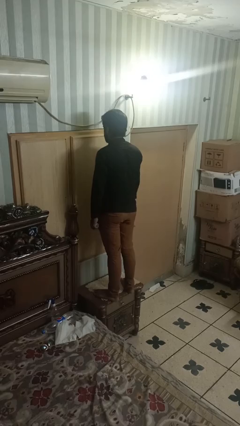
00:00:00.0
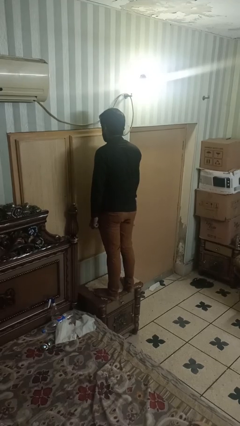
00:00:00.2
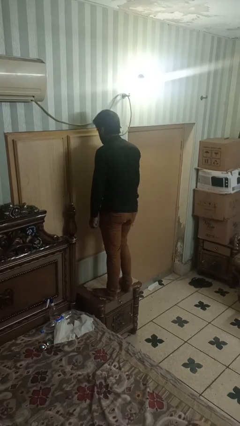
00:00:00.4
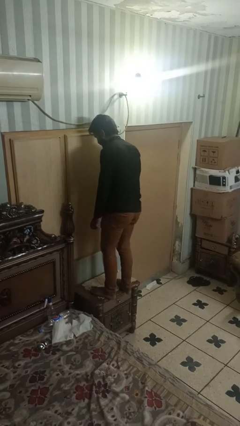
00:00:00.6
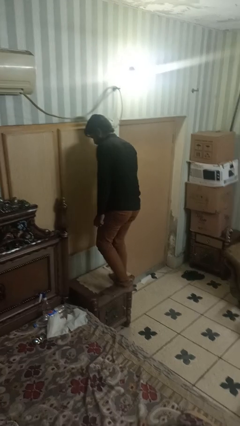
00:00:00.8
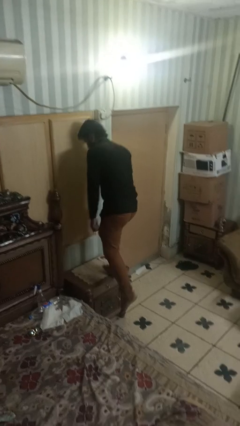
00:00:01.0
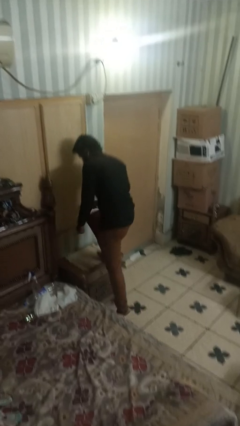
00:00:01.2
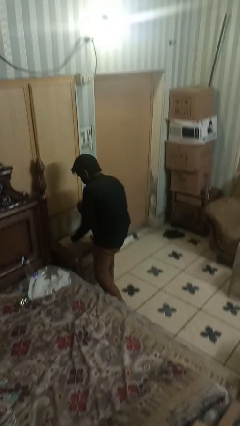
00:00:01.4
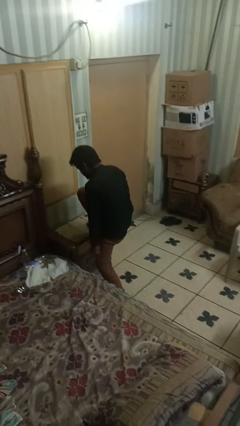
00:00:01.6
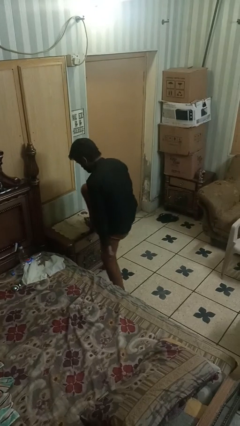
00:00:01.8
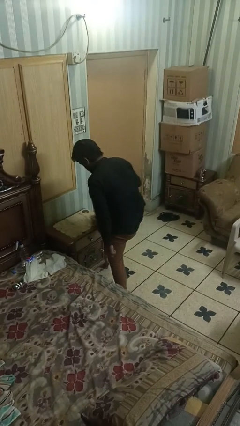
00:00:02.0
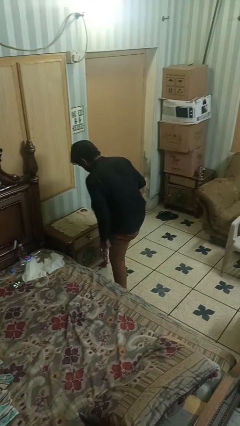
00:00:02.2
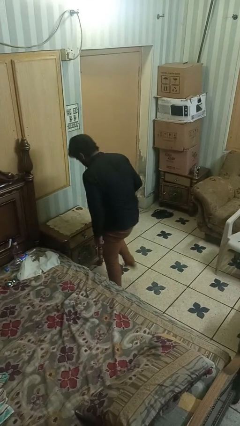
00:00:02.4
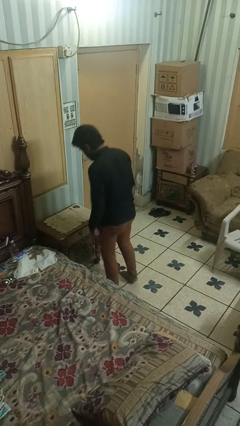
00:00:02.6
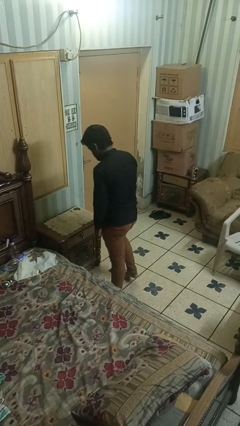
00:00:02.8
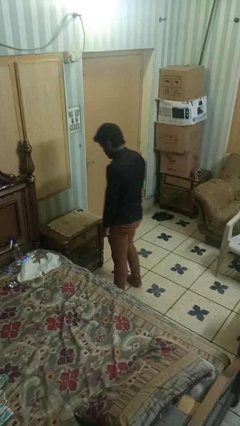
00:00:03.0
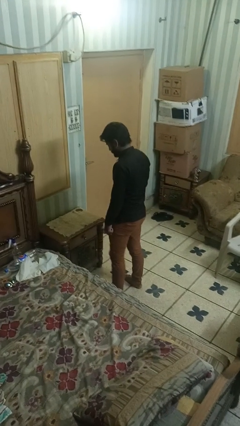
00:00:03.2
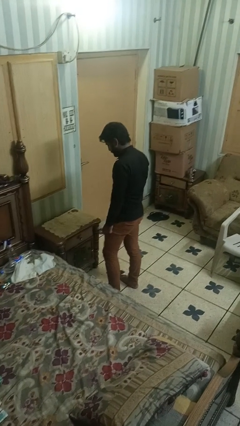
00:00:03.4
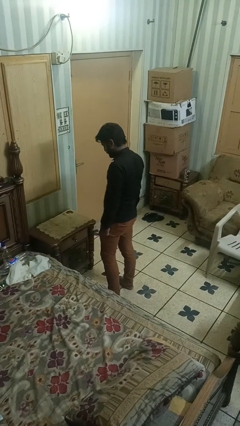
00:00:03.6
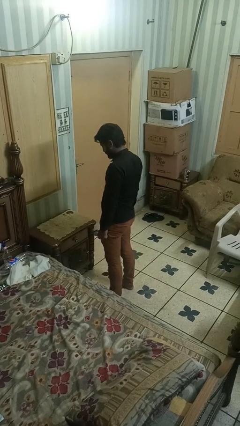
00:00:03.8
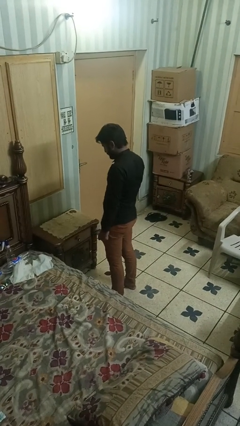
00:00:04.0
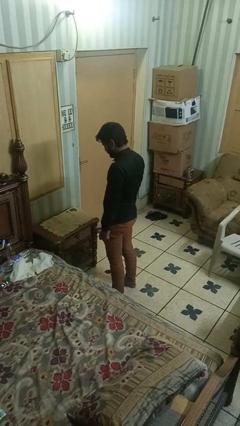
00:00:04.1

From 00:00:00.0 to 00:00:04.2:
person climbs off table

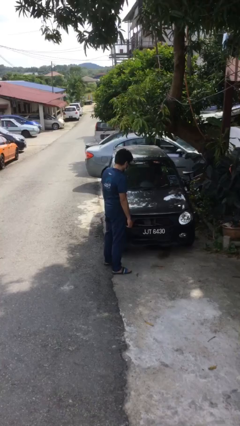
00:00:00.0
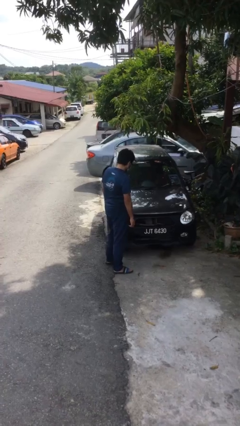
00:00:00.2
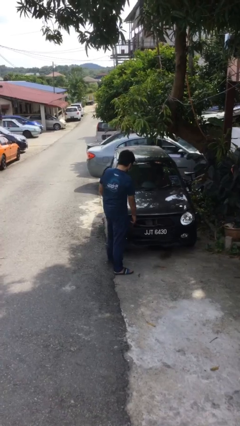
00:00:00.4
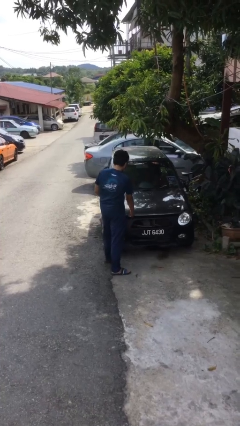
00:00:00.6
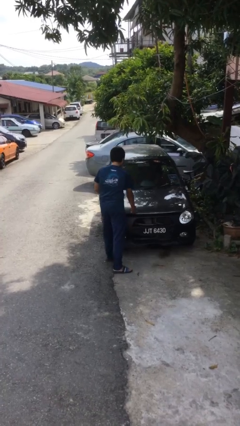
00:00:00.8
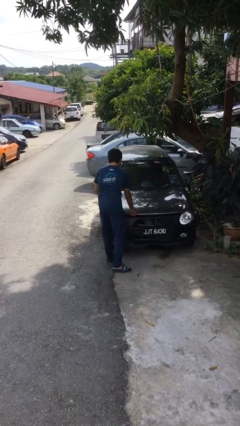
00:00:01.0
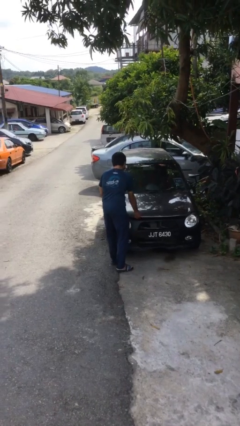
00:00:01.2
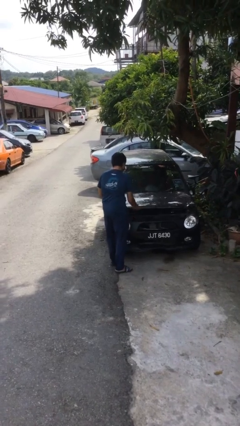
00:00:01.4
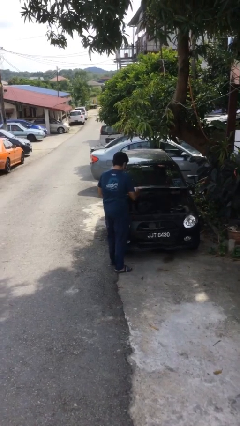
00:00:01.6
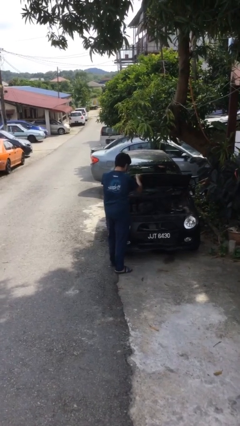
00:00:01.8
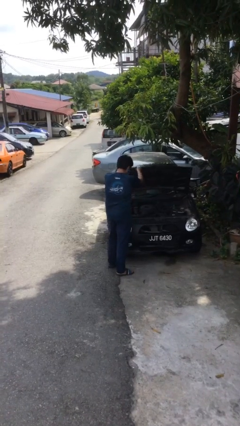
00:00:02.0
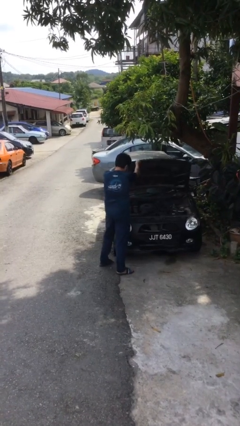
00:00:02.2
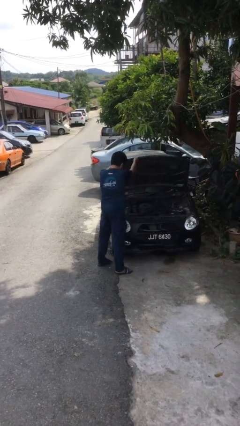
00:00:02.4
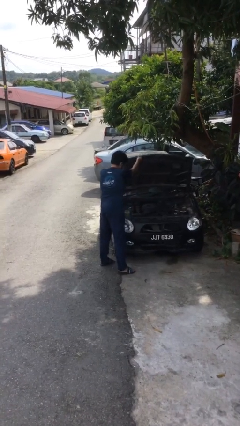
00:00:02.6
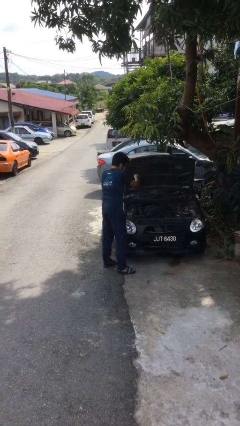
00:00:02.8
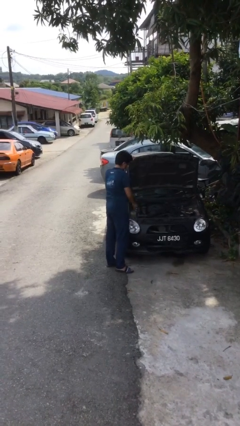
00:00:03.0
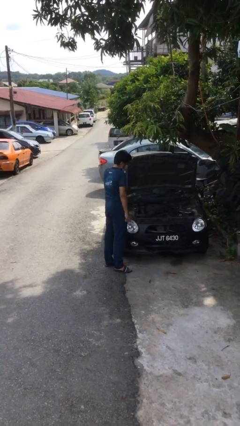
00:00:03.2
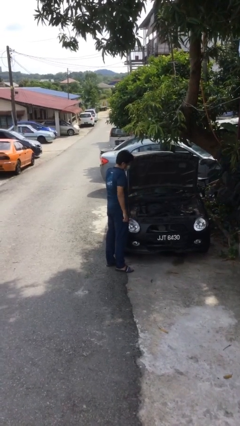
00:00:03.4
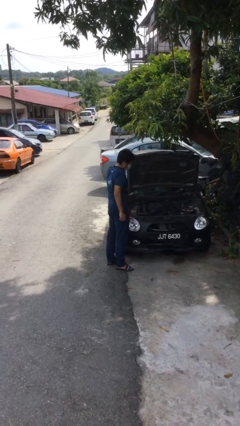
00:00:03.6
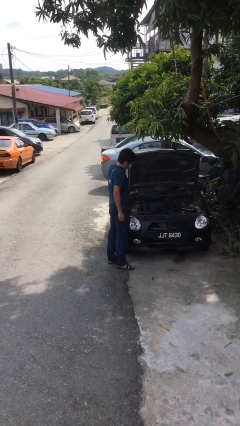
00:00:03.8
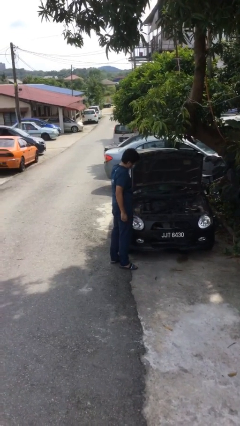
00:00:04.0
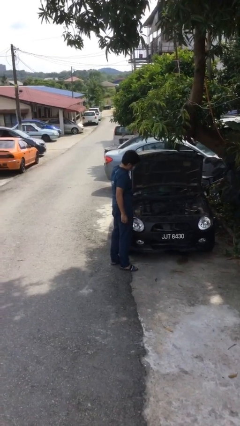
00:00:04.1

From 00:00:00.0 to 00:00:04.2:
person opens car hood

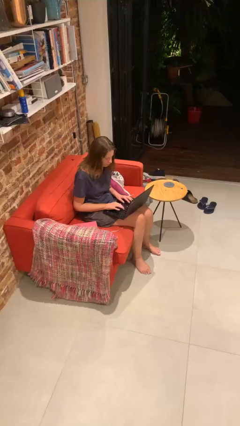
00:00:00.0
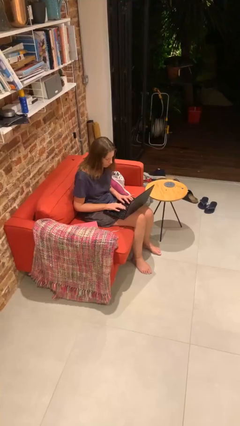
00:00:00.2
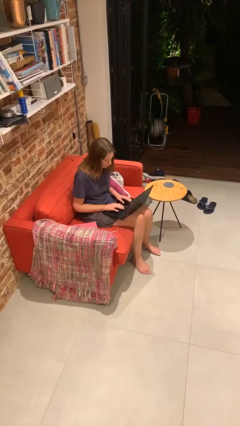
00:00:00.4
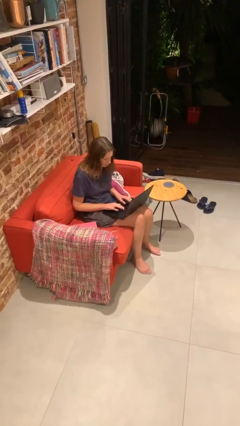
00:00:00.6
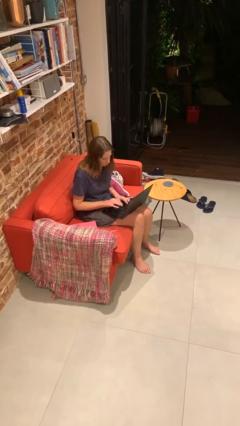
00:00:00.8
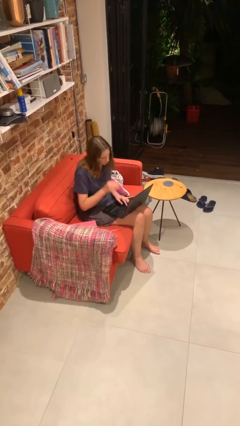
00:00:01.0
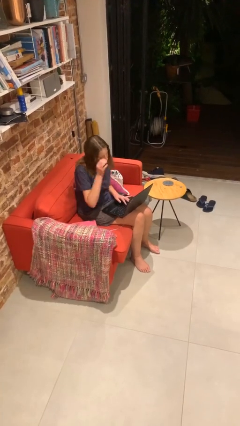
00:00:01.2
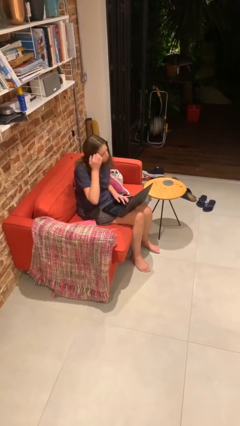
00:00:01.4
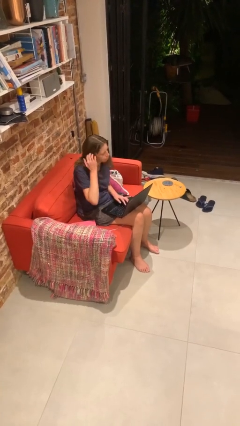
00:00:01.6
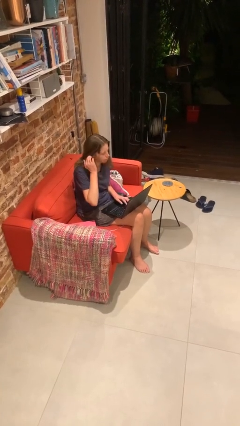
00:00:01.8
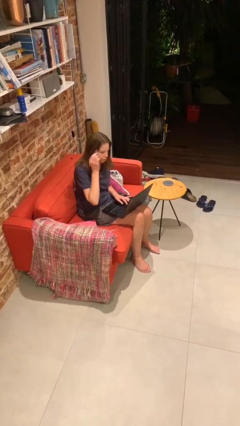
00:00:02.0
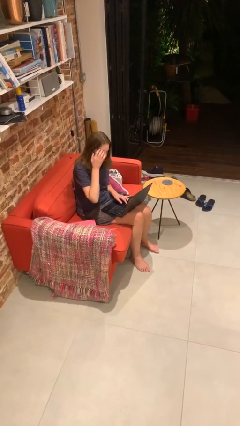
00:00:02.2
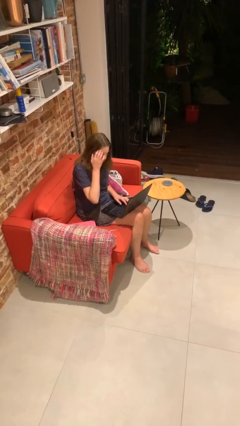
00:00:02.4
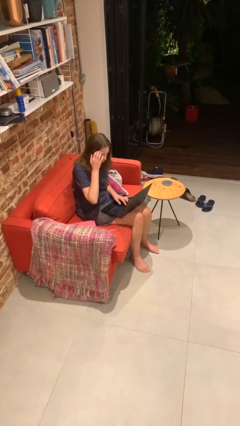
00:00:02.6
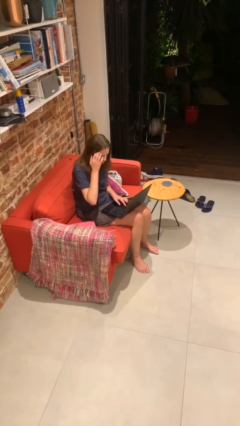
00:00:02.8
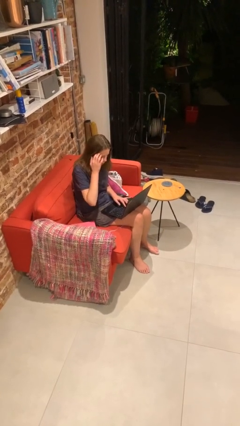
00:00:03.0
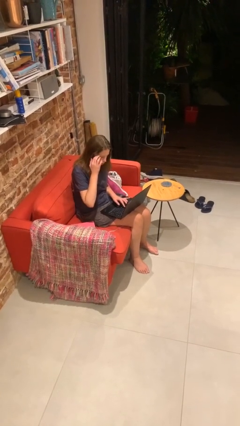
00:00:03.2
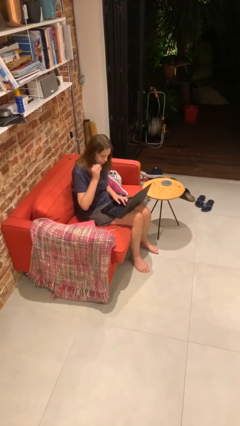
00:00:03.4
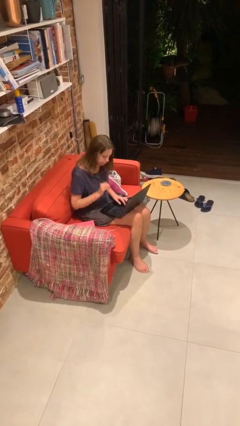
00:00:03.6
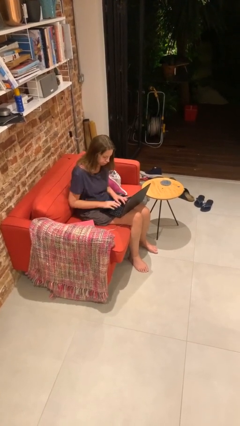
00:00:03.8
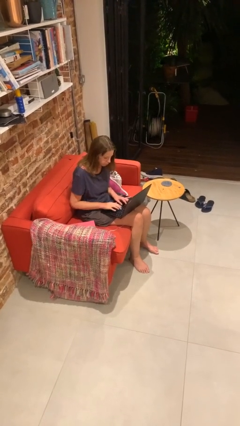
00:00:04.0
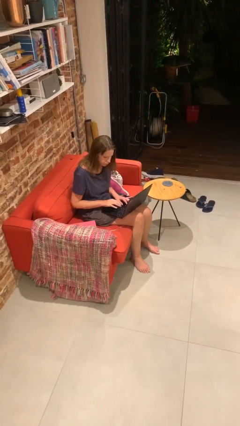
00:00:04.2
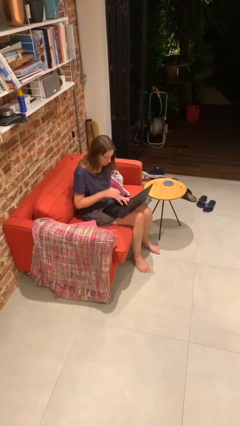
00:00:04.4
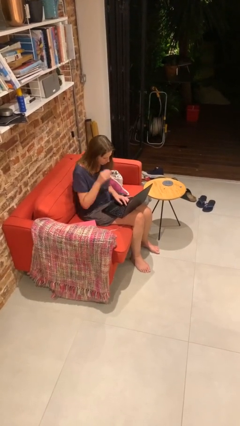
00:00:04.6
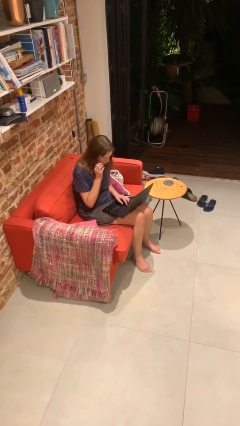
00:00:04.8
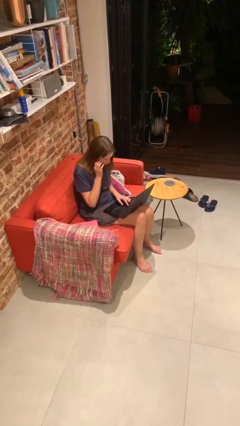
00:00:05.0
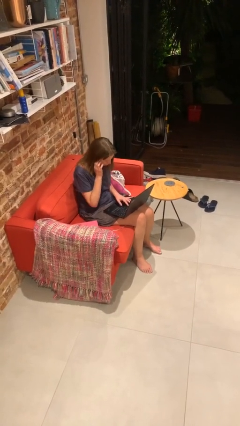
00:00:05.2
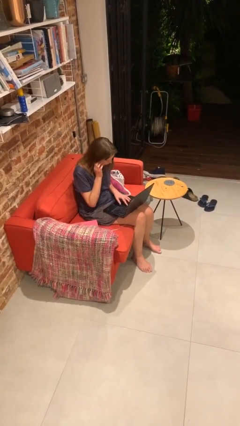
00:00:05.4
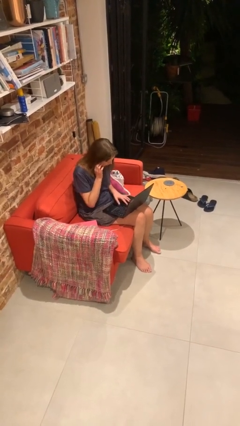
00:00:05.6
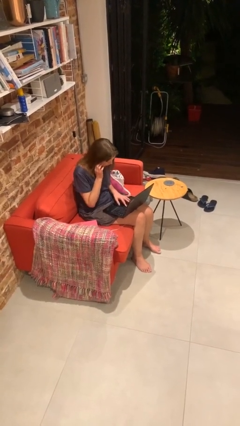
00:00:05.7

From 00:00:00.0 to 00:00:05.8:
person interacts with laptop

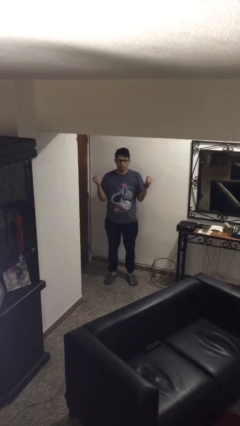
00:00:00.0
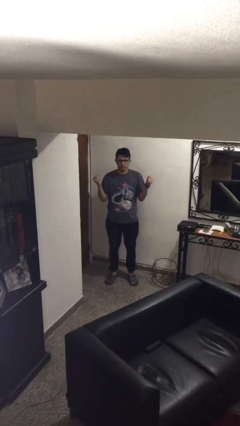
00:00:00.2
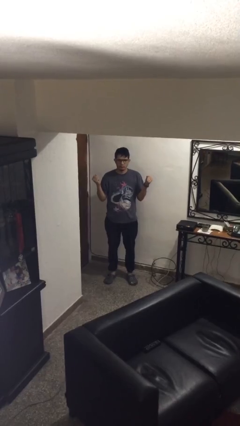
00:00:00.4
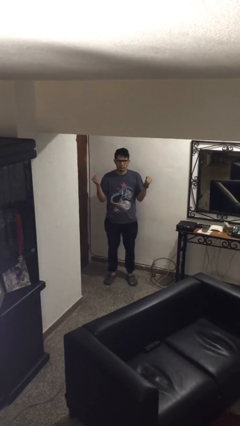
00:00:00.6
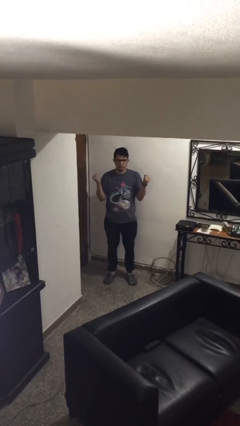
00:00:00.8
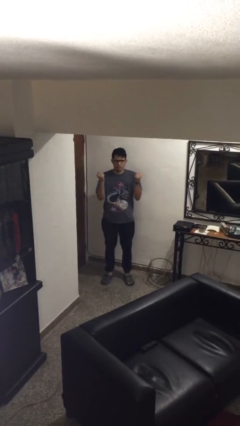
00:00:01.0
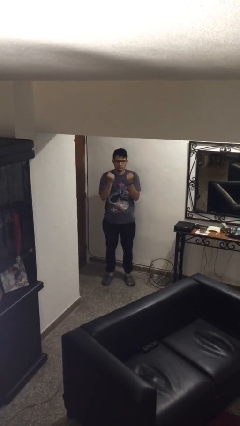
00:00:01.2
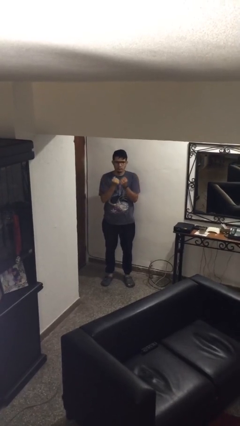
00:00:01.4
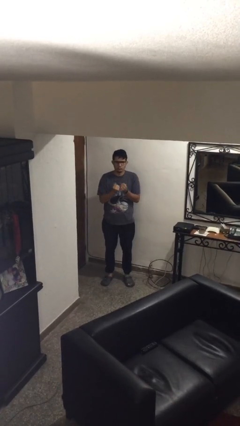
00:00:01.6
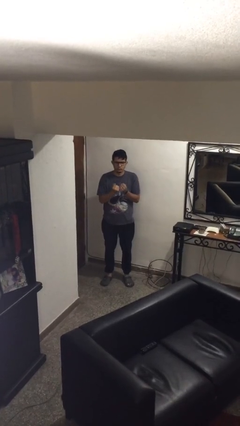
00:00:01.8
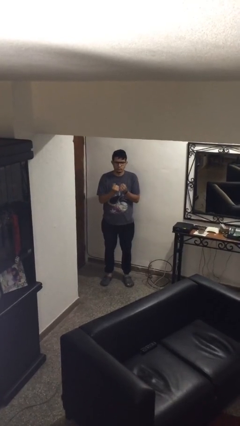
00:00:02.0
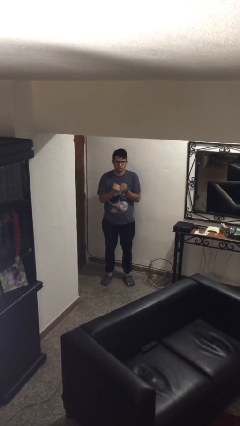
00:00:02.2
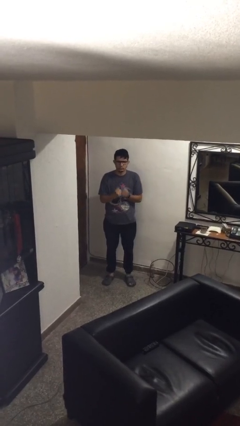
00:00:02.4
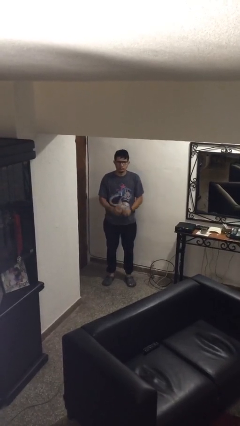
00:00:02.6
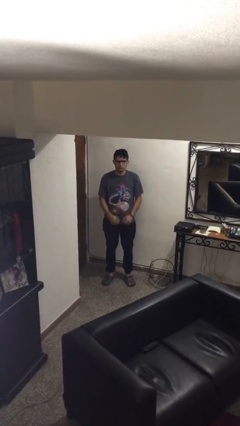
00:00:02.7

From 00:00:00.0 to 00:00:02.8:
person gestures zoom out

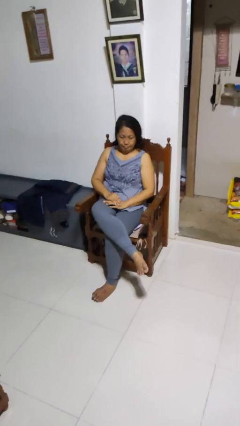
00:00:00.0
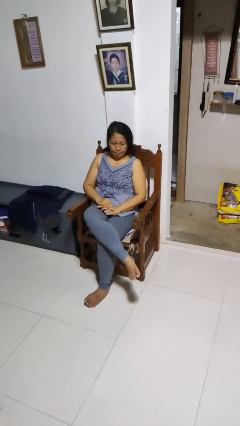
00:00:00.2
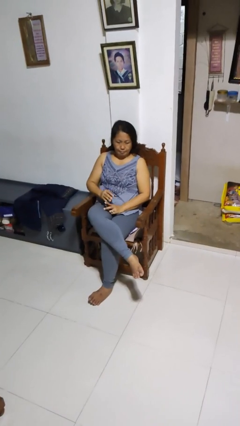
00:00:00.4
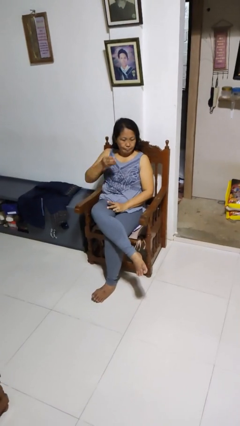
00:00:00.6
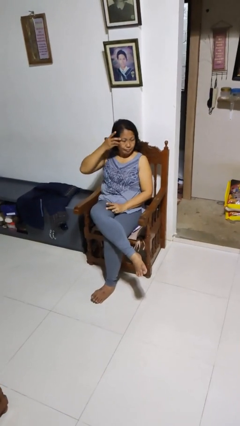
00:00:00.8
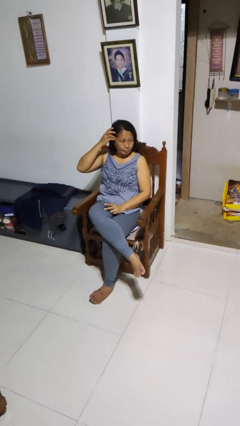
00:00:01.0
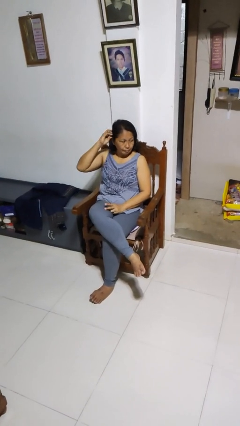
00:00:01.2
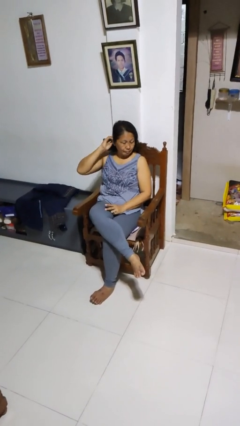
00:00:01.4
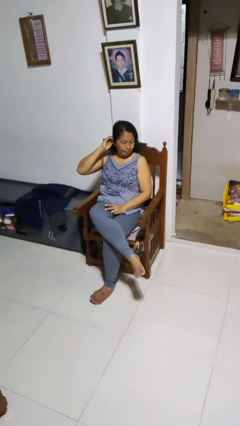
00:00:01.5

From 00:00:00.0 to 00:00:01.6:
person strokes hair
